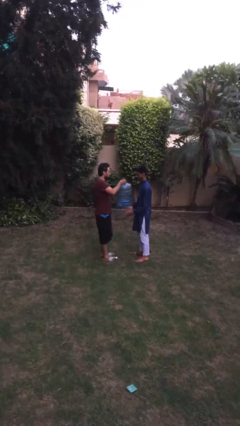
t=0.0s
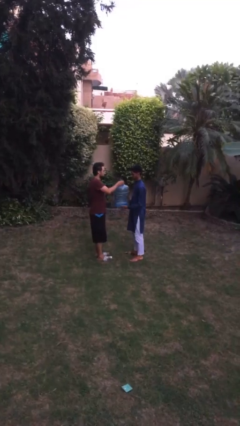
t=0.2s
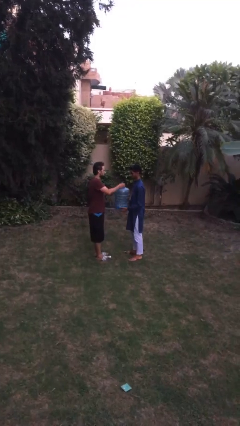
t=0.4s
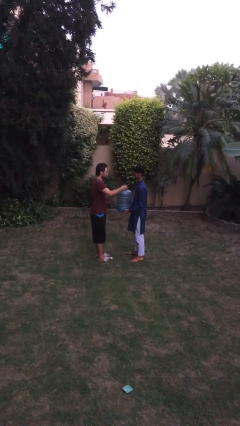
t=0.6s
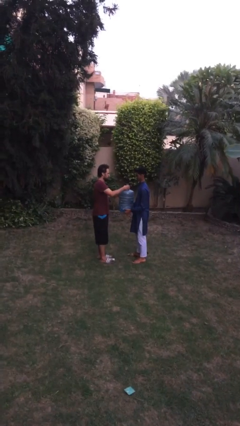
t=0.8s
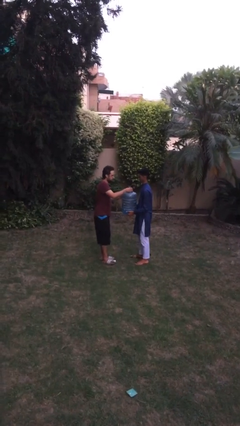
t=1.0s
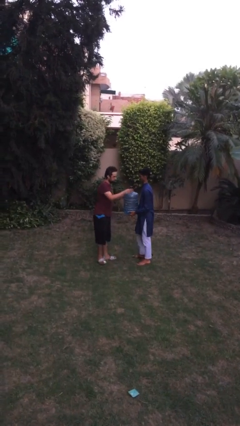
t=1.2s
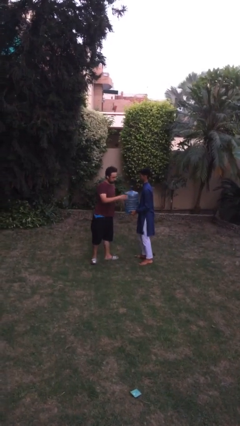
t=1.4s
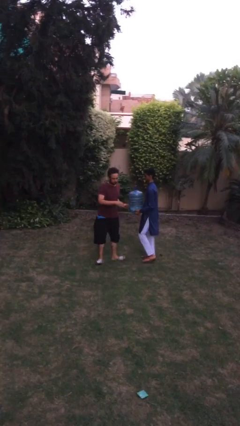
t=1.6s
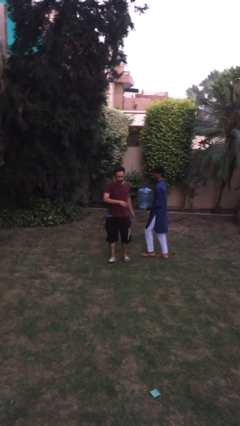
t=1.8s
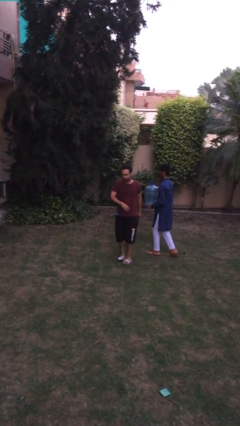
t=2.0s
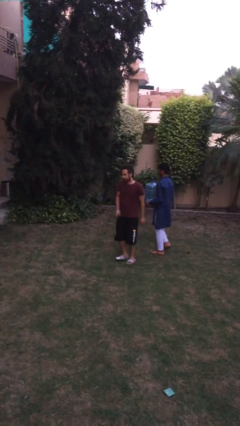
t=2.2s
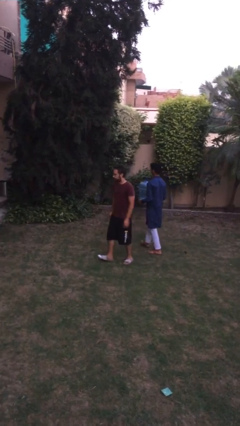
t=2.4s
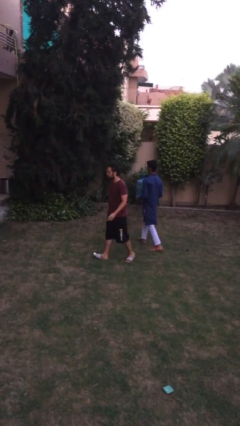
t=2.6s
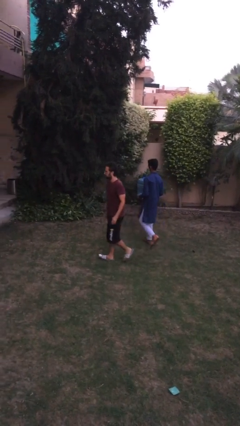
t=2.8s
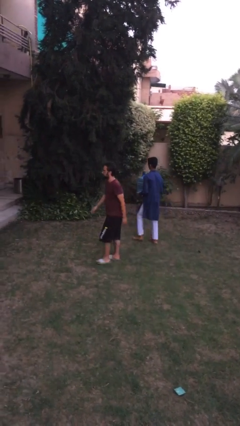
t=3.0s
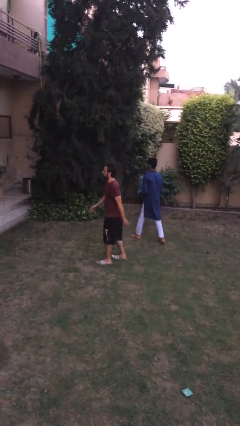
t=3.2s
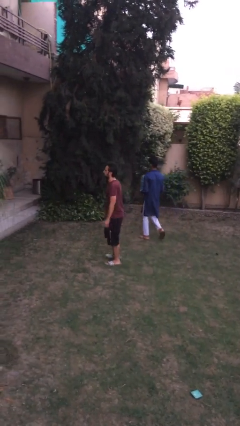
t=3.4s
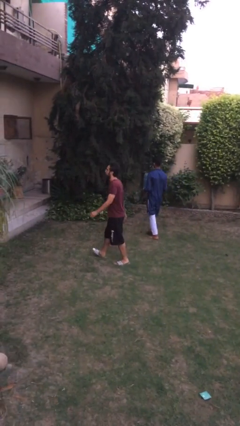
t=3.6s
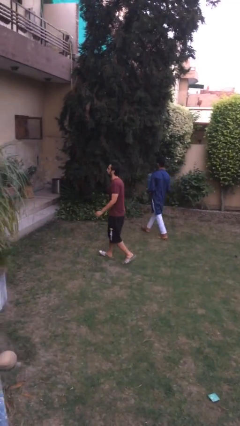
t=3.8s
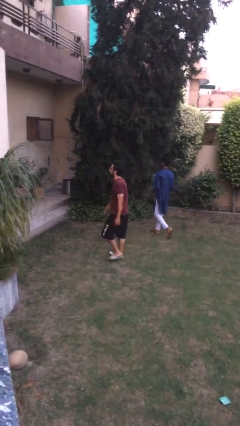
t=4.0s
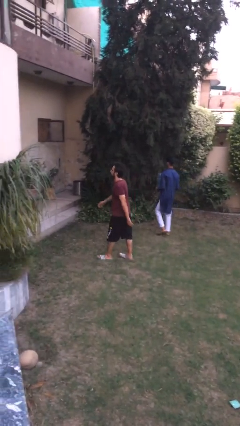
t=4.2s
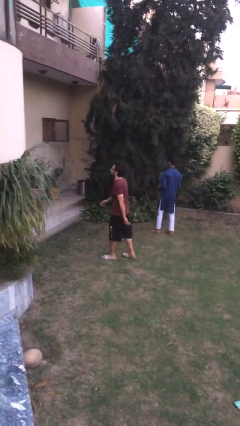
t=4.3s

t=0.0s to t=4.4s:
person transfers object to person

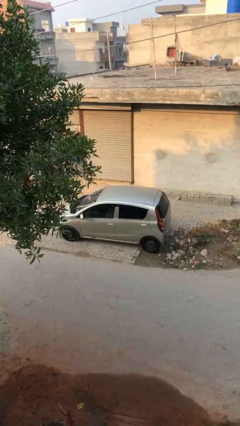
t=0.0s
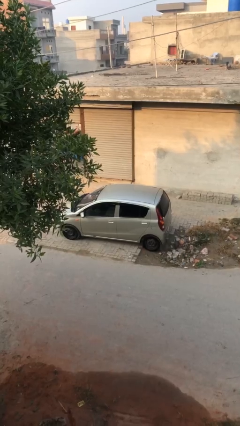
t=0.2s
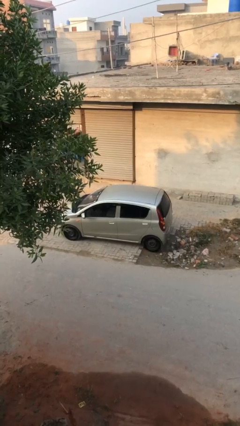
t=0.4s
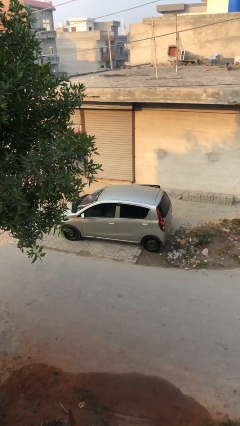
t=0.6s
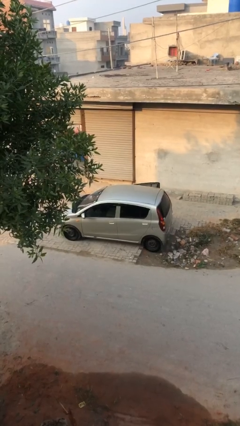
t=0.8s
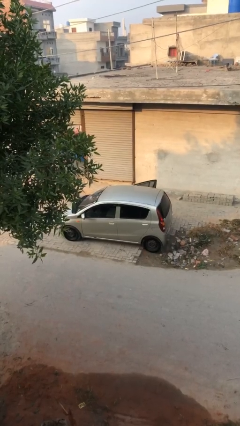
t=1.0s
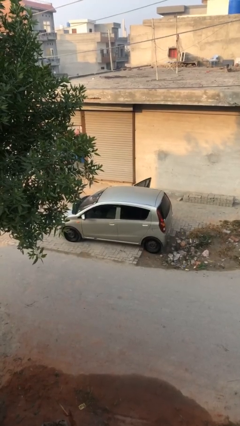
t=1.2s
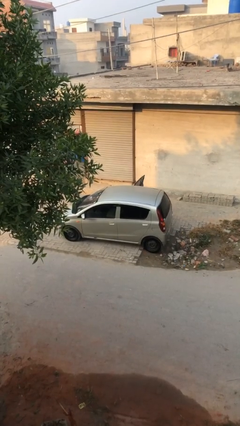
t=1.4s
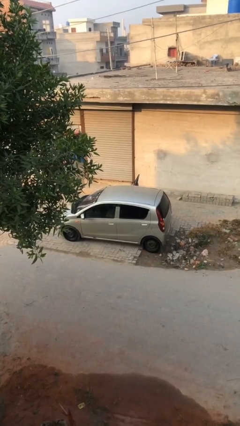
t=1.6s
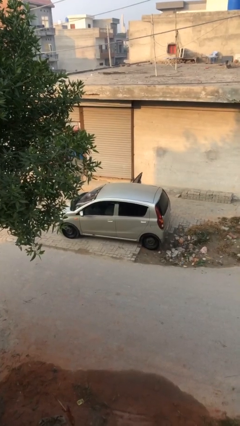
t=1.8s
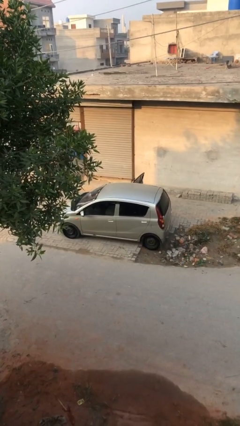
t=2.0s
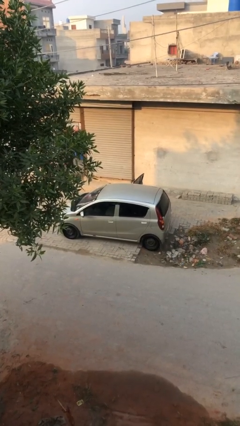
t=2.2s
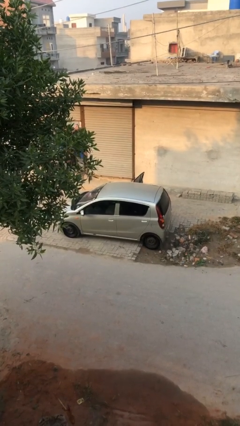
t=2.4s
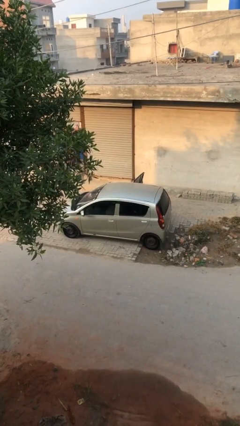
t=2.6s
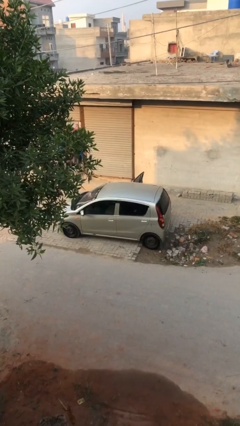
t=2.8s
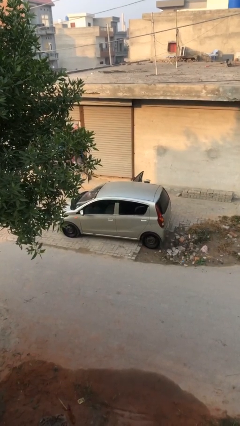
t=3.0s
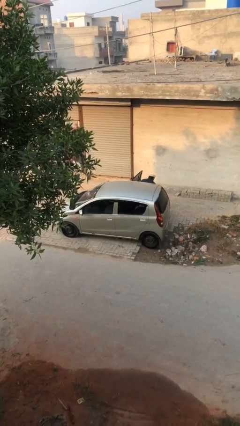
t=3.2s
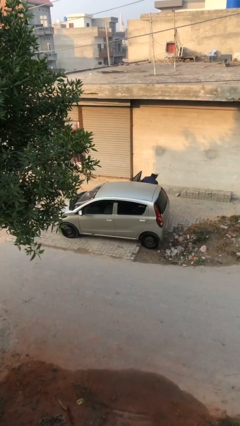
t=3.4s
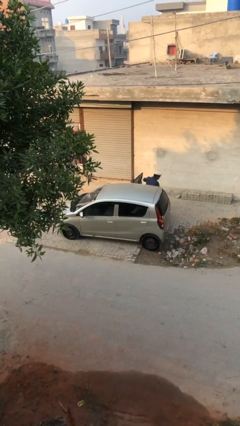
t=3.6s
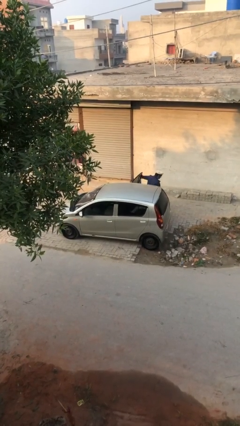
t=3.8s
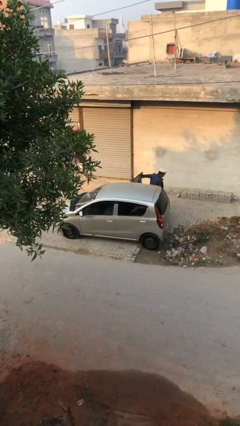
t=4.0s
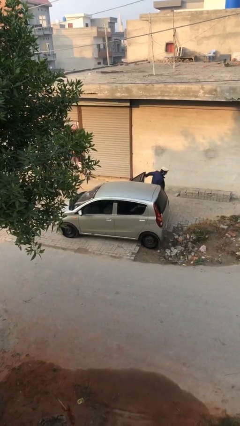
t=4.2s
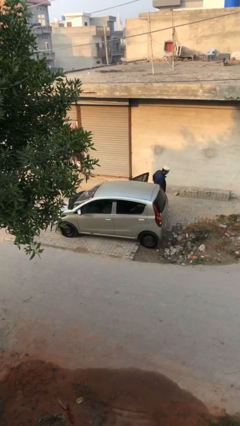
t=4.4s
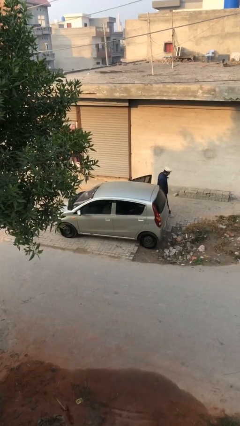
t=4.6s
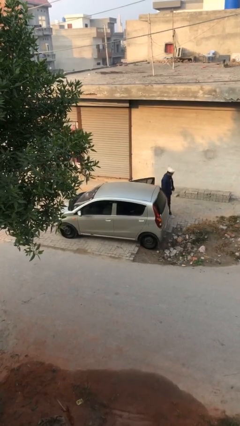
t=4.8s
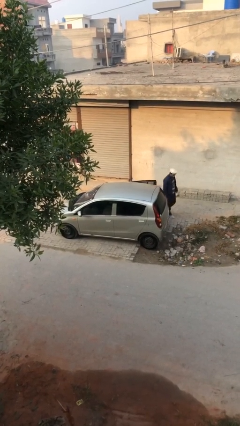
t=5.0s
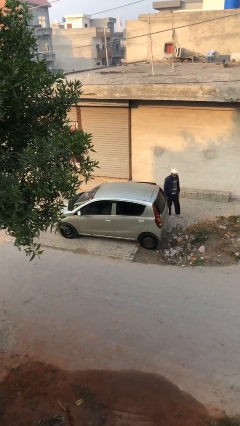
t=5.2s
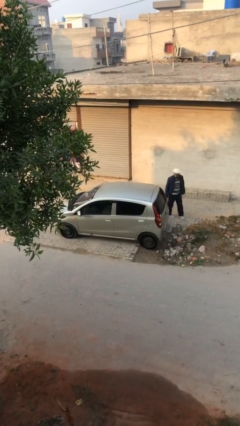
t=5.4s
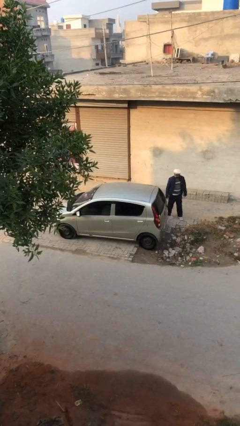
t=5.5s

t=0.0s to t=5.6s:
car drops off person

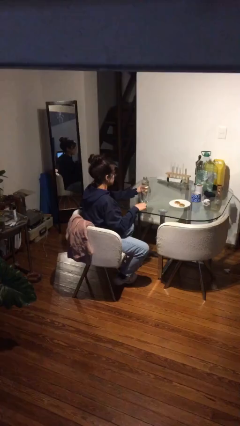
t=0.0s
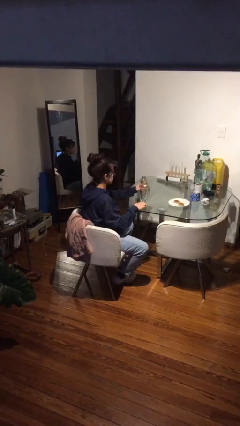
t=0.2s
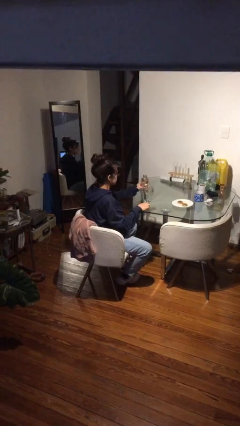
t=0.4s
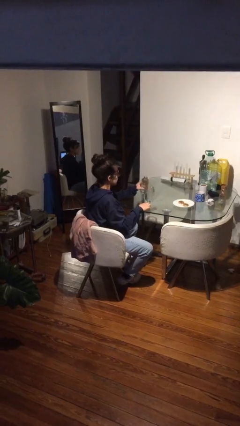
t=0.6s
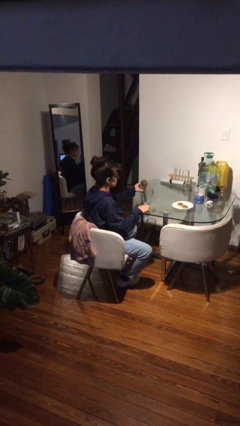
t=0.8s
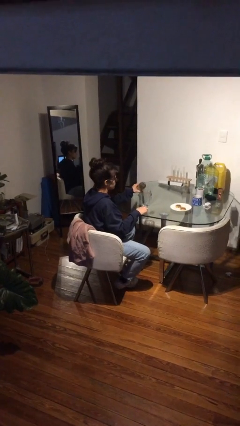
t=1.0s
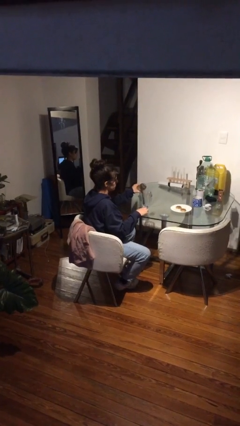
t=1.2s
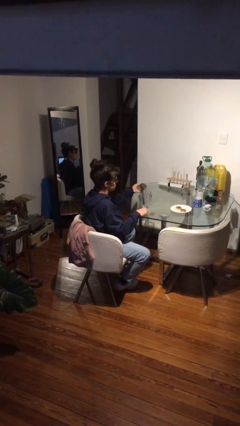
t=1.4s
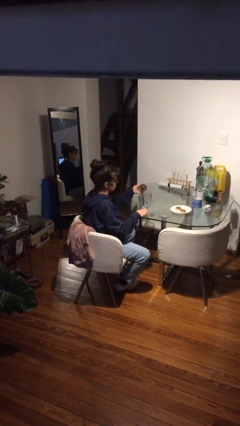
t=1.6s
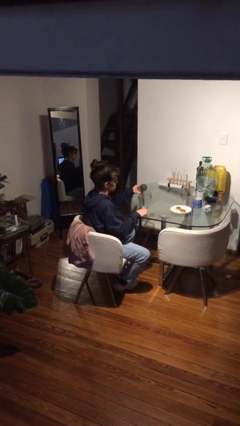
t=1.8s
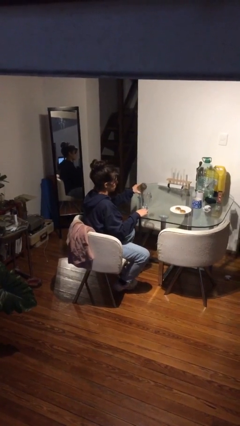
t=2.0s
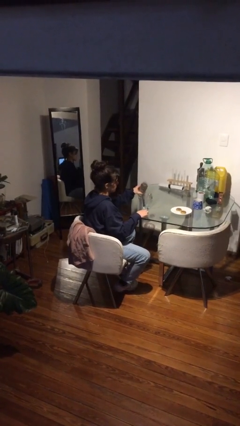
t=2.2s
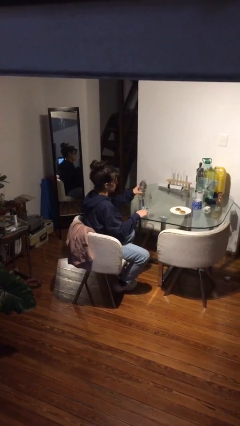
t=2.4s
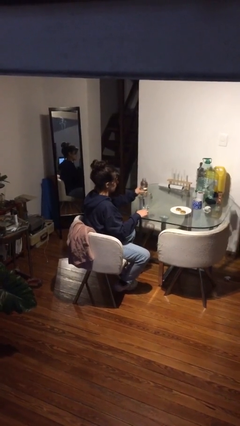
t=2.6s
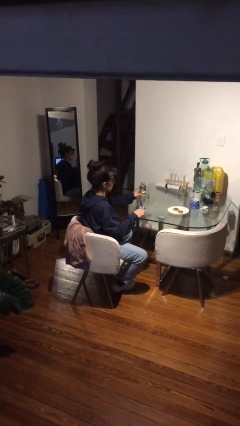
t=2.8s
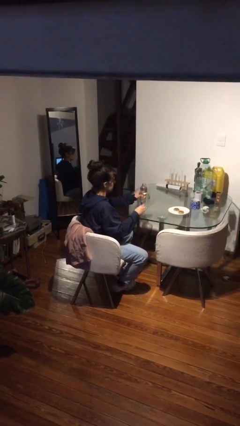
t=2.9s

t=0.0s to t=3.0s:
person pours liquid into cup

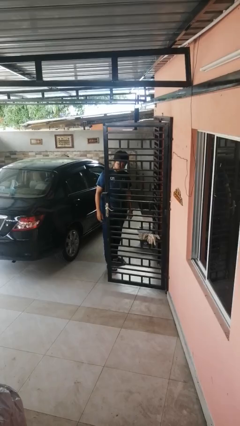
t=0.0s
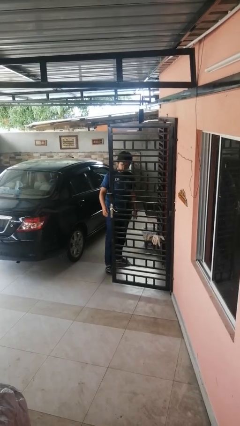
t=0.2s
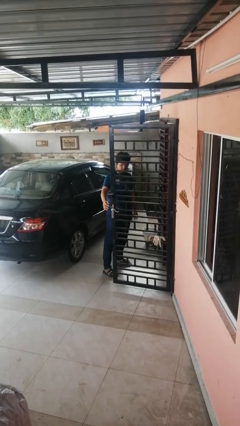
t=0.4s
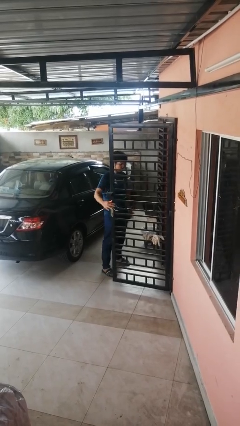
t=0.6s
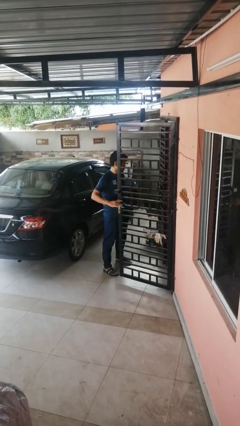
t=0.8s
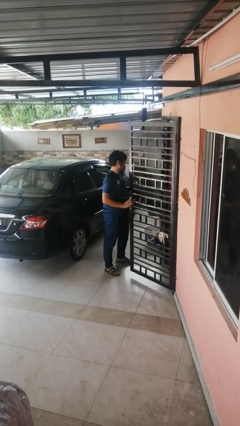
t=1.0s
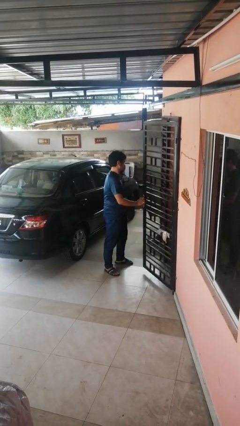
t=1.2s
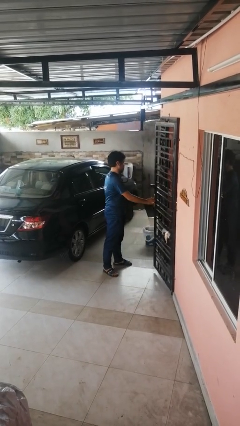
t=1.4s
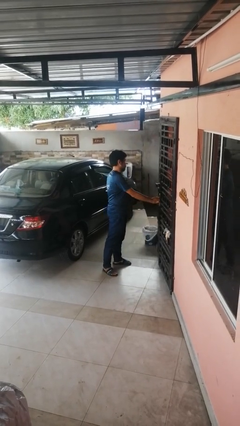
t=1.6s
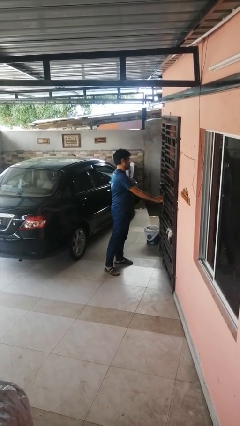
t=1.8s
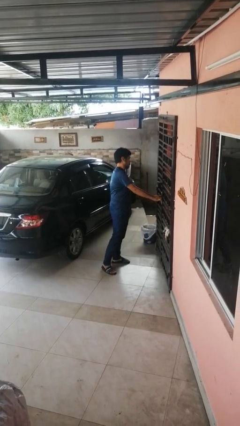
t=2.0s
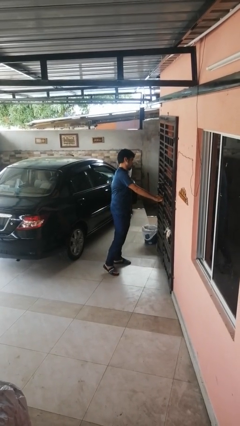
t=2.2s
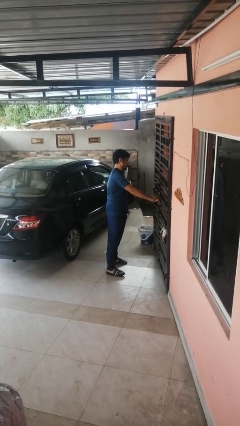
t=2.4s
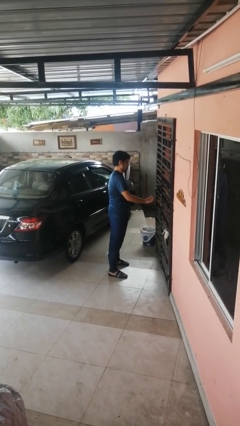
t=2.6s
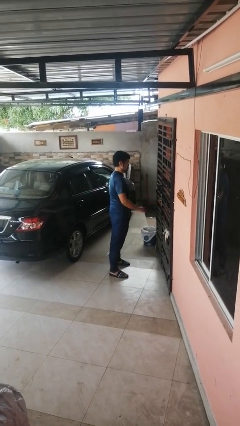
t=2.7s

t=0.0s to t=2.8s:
person closes gate

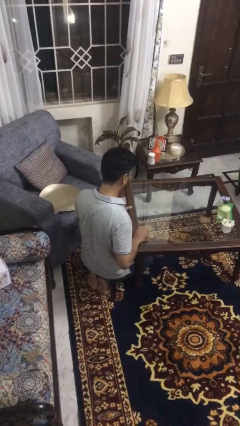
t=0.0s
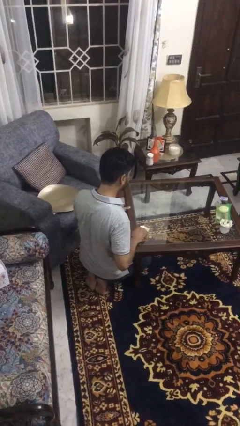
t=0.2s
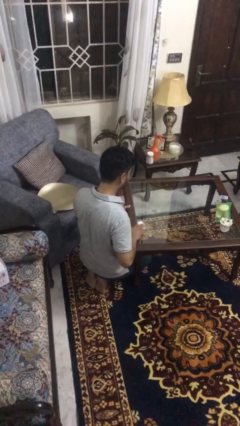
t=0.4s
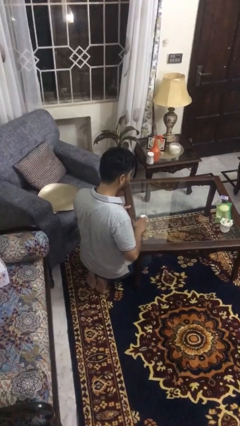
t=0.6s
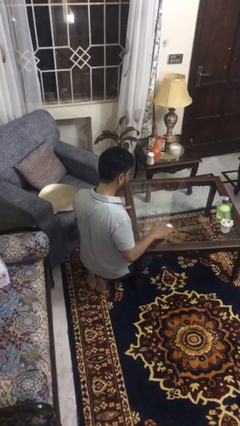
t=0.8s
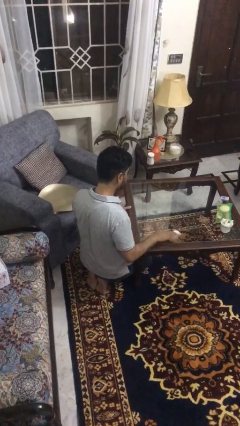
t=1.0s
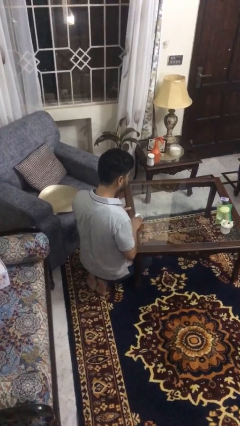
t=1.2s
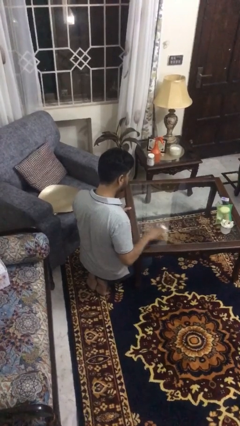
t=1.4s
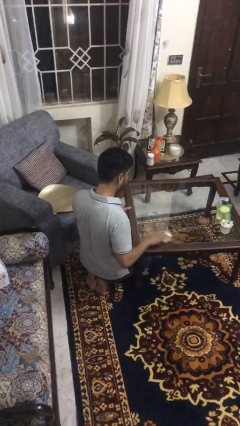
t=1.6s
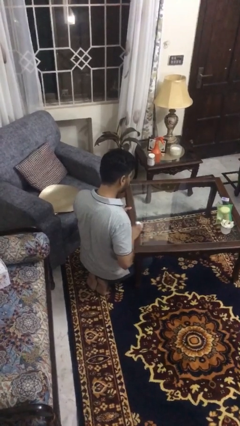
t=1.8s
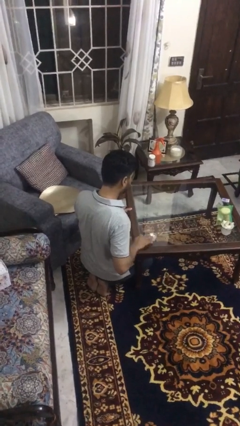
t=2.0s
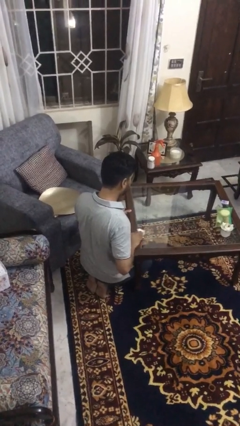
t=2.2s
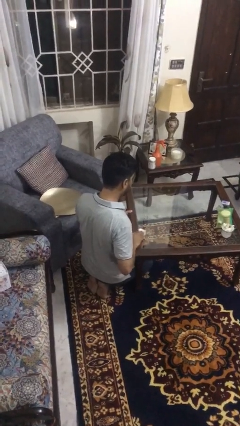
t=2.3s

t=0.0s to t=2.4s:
person cleans table with rag
